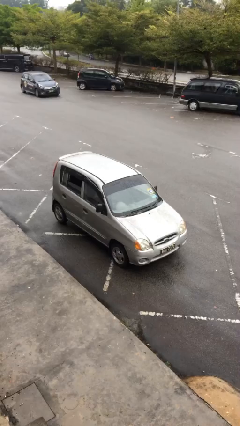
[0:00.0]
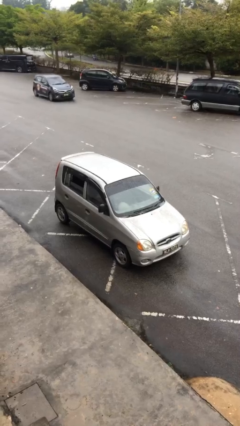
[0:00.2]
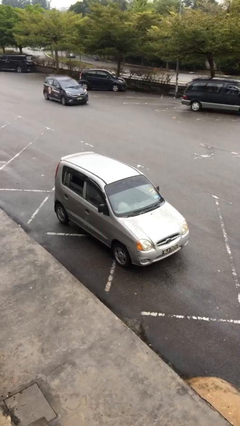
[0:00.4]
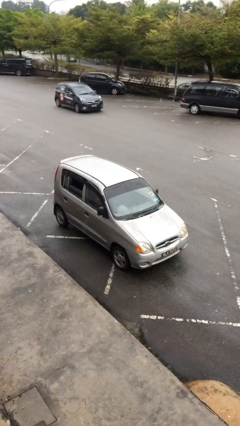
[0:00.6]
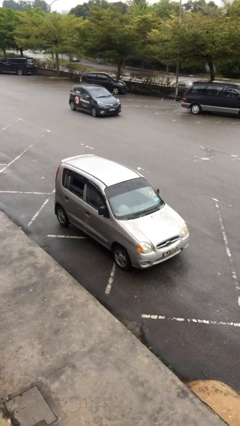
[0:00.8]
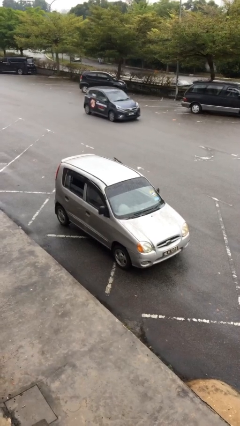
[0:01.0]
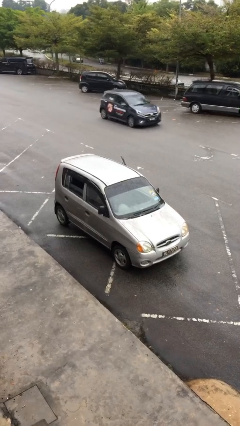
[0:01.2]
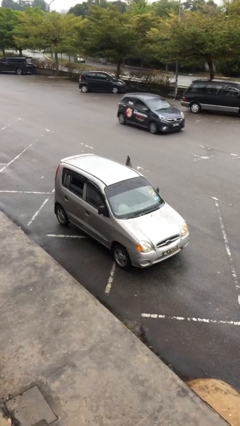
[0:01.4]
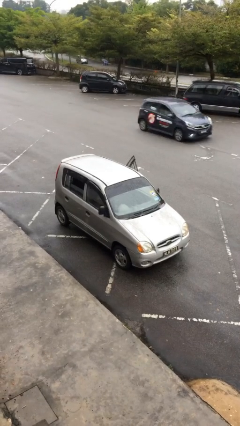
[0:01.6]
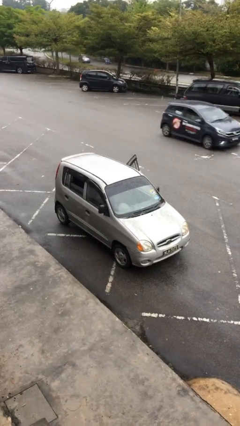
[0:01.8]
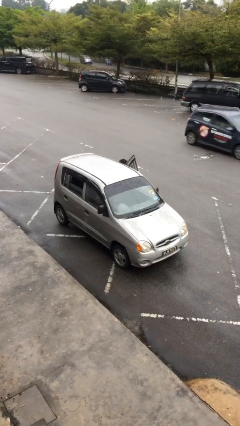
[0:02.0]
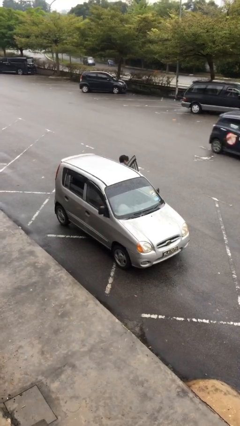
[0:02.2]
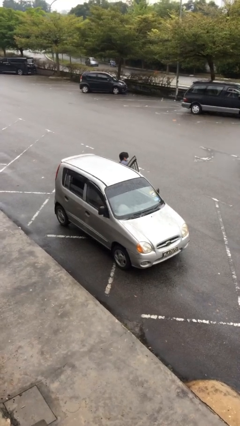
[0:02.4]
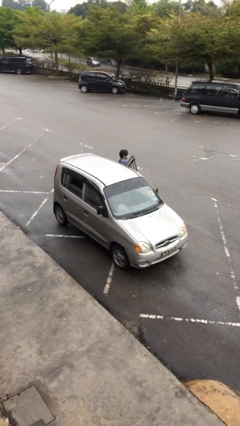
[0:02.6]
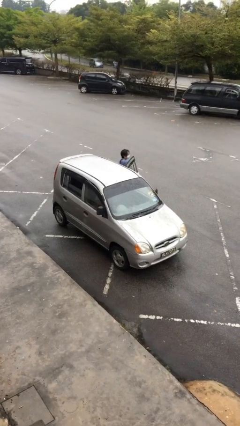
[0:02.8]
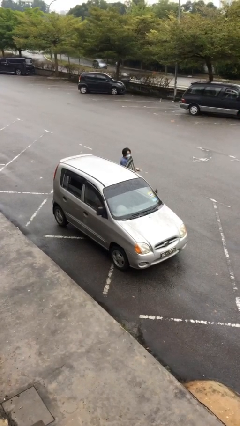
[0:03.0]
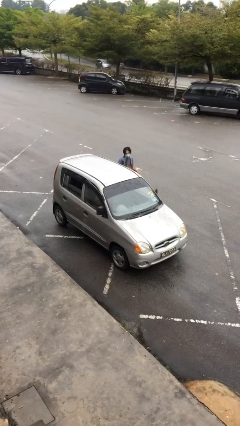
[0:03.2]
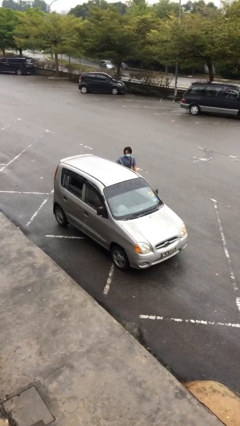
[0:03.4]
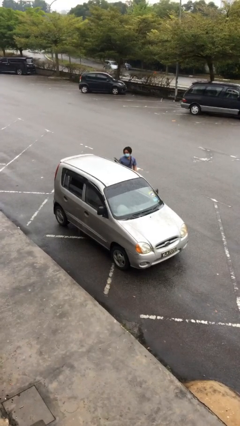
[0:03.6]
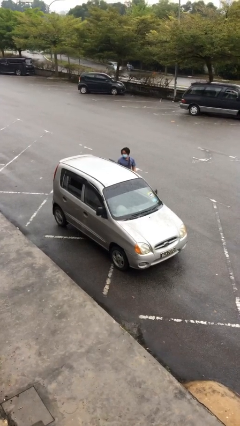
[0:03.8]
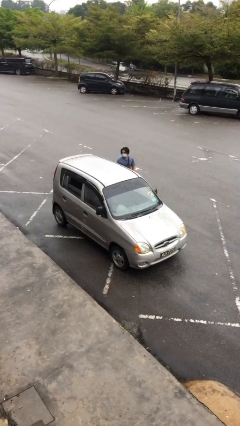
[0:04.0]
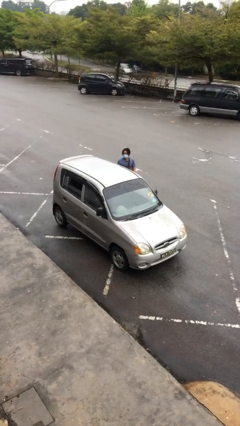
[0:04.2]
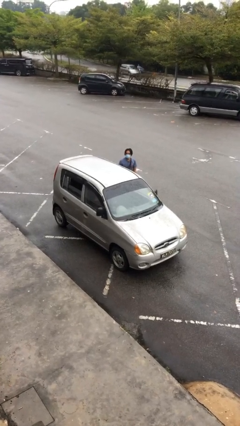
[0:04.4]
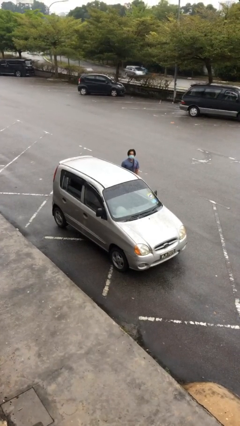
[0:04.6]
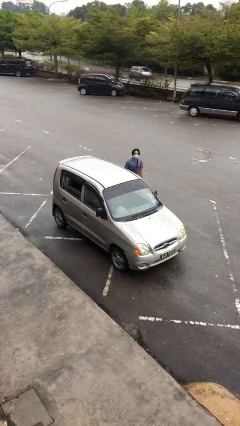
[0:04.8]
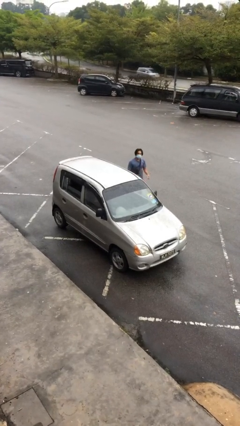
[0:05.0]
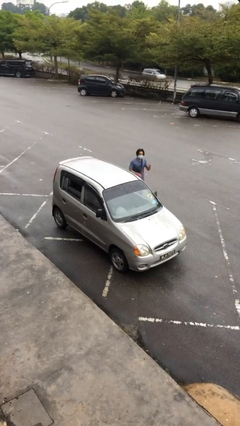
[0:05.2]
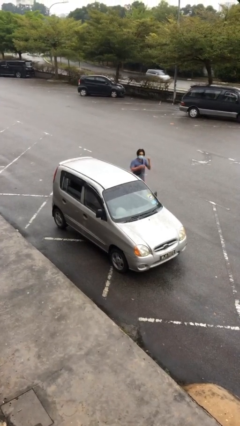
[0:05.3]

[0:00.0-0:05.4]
car drops off person

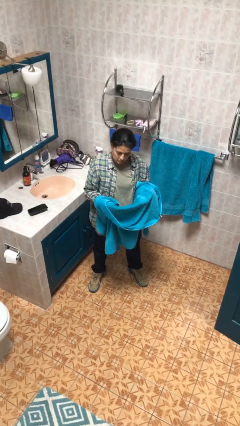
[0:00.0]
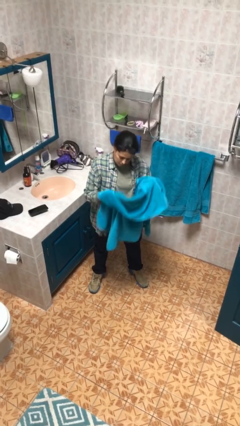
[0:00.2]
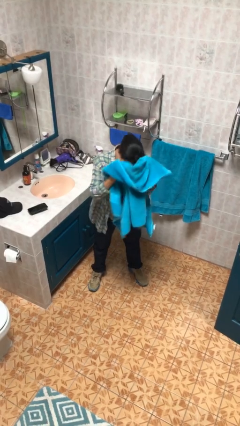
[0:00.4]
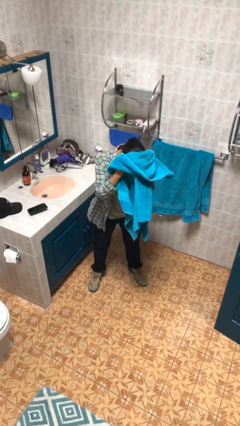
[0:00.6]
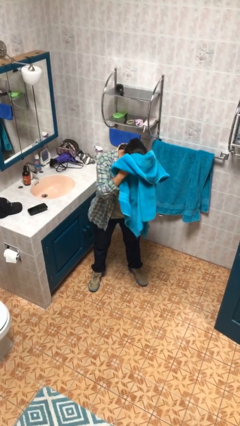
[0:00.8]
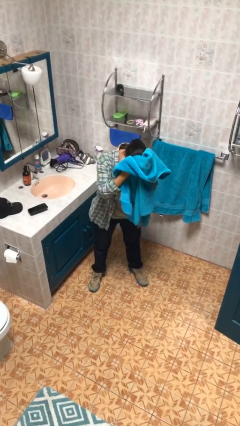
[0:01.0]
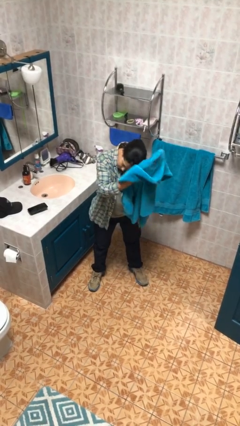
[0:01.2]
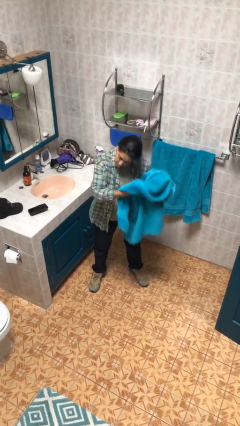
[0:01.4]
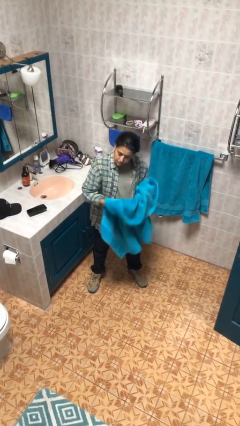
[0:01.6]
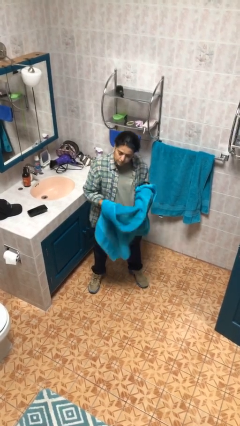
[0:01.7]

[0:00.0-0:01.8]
person dries hair with towel

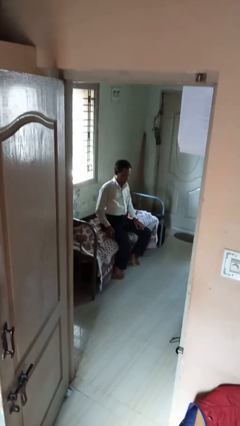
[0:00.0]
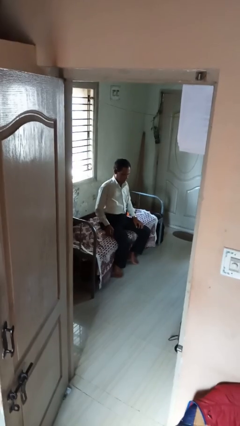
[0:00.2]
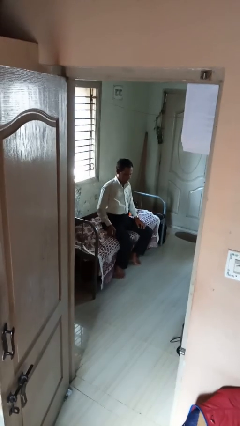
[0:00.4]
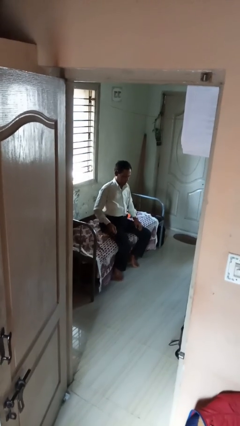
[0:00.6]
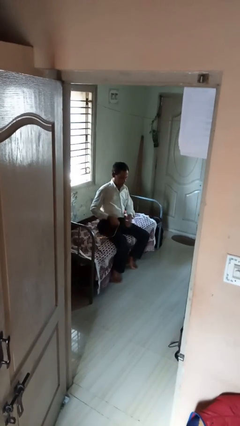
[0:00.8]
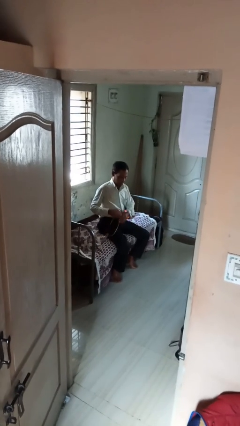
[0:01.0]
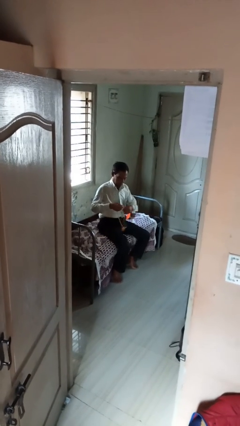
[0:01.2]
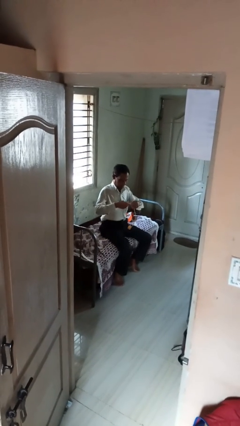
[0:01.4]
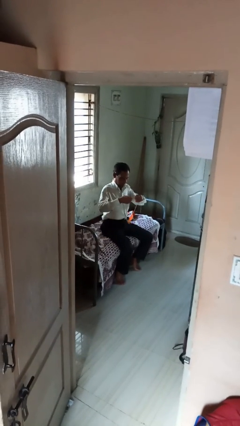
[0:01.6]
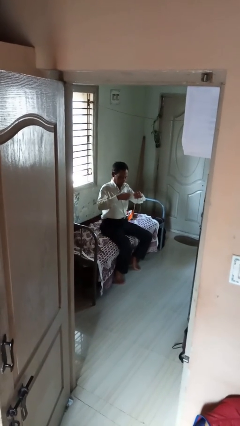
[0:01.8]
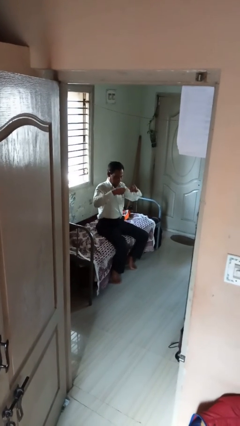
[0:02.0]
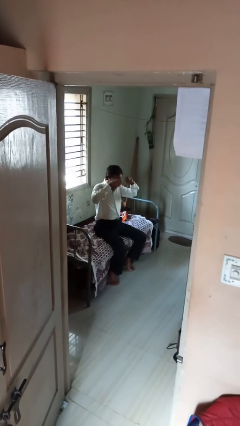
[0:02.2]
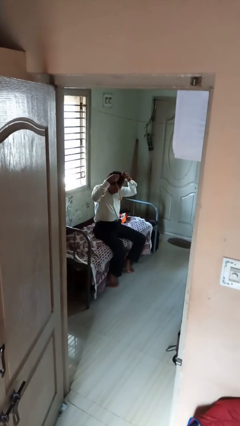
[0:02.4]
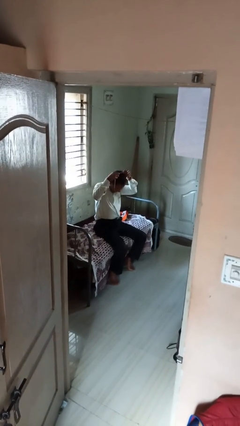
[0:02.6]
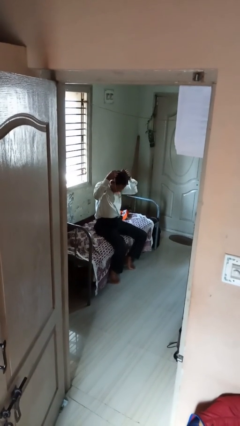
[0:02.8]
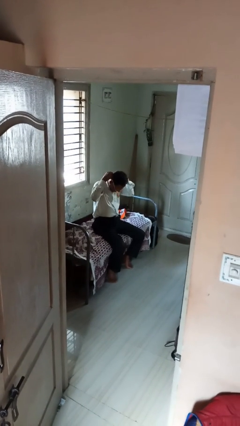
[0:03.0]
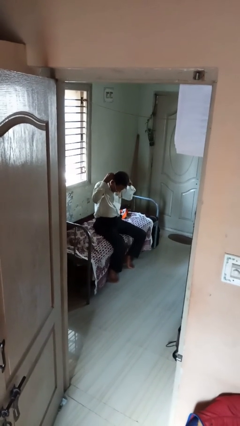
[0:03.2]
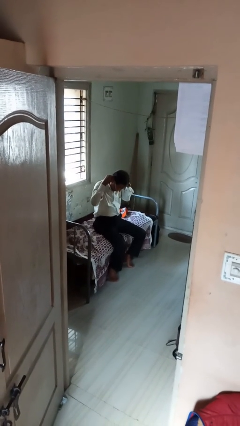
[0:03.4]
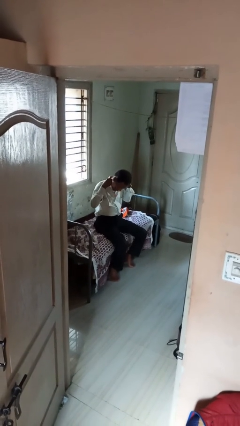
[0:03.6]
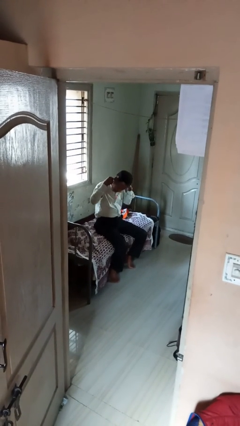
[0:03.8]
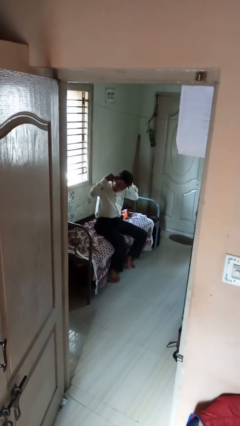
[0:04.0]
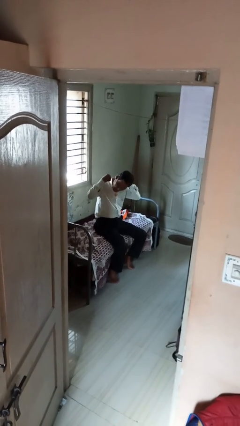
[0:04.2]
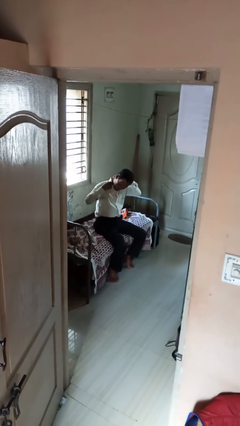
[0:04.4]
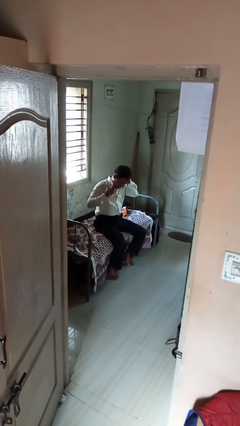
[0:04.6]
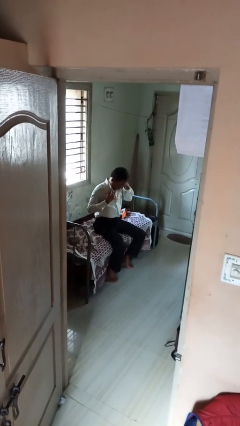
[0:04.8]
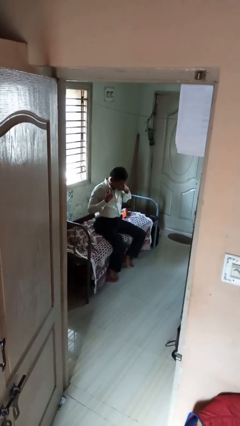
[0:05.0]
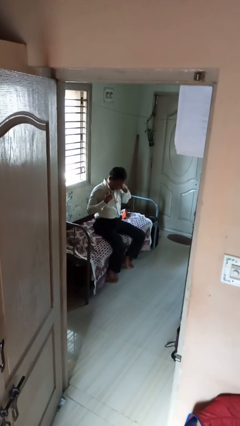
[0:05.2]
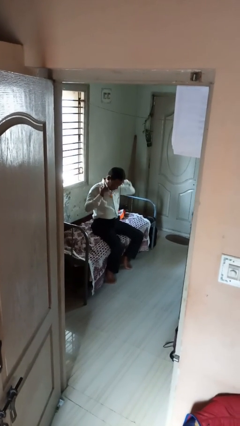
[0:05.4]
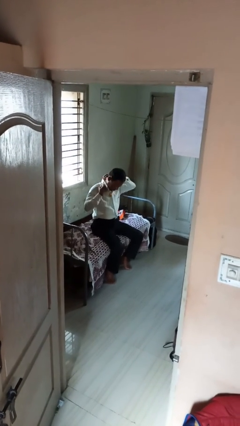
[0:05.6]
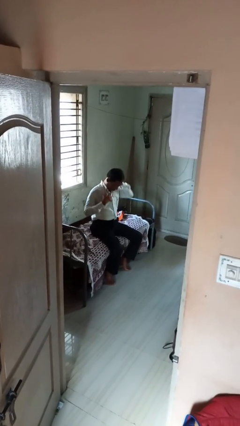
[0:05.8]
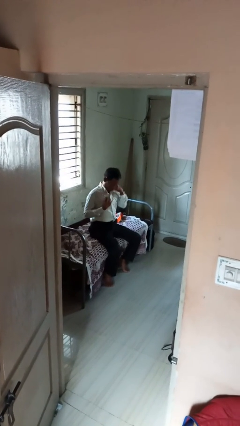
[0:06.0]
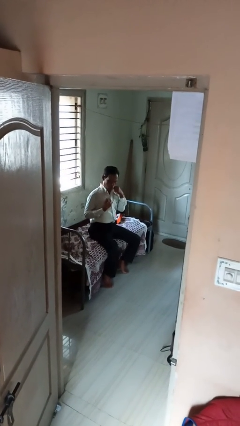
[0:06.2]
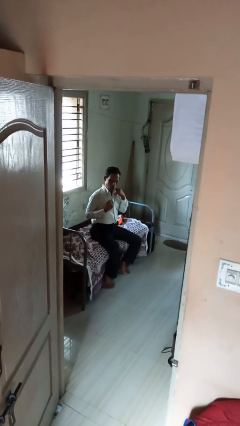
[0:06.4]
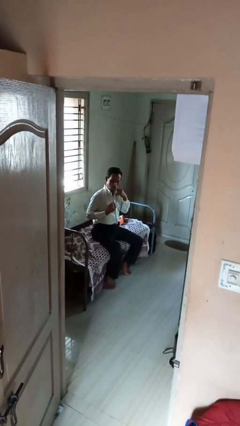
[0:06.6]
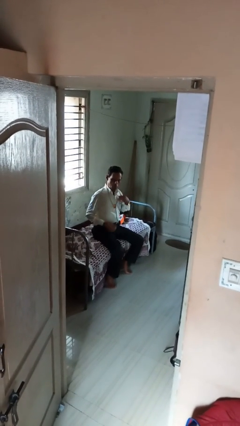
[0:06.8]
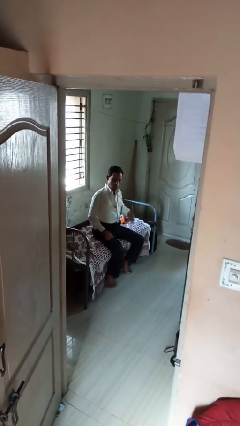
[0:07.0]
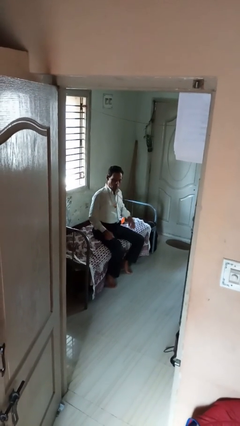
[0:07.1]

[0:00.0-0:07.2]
person puts on necklace

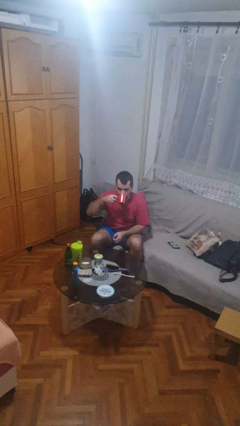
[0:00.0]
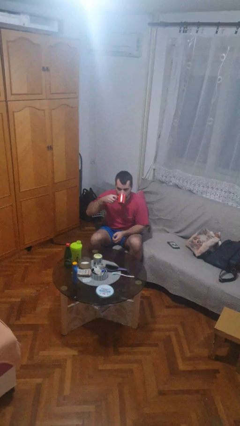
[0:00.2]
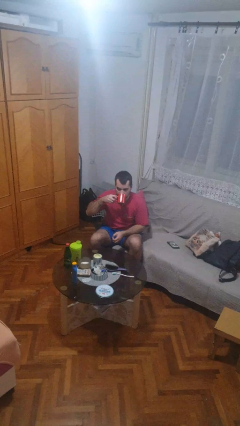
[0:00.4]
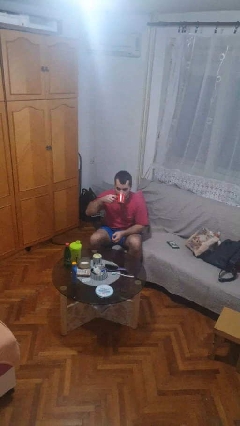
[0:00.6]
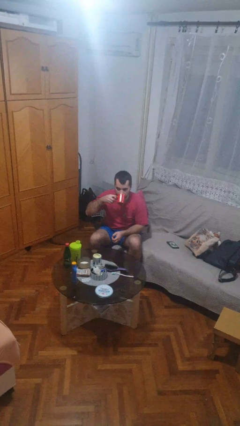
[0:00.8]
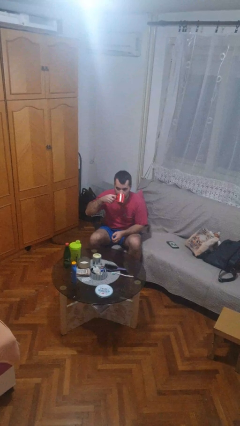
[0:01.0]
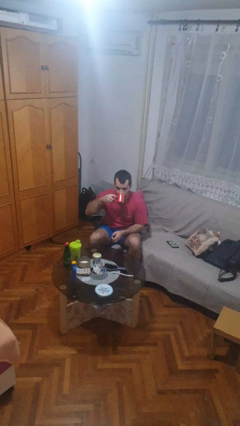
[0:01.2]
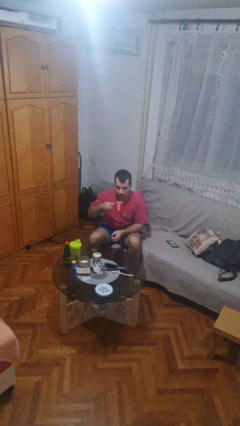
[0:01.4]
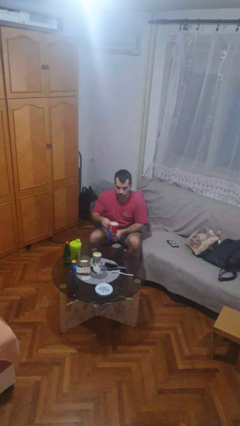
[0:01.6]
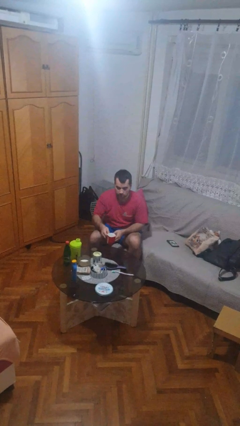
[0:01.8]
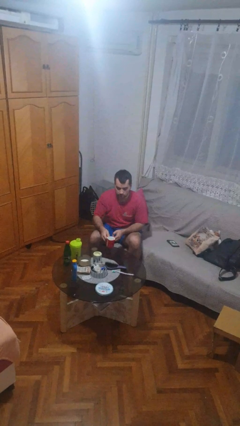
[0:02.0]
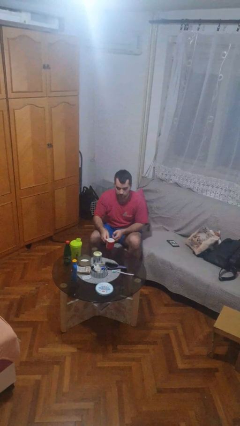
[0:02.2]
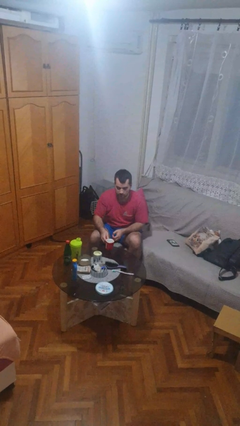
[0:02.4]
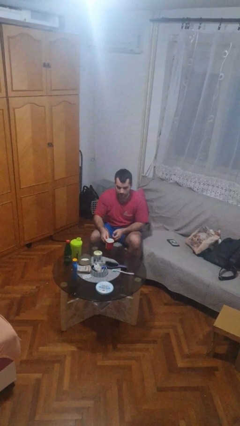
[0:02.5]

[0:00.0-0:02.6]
person puts down object on table

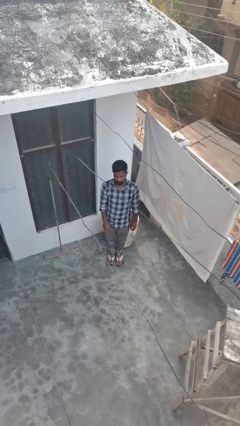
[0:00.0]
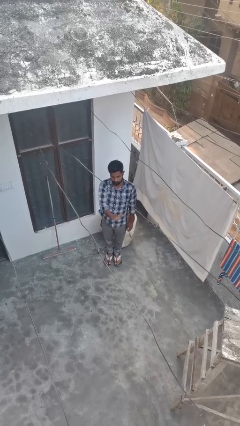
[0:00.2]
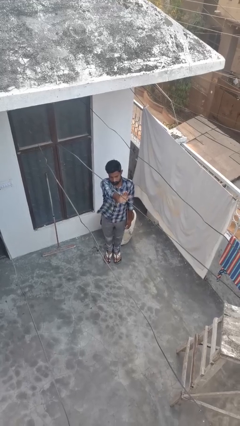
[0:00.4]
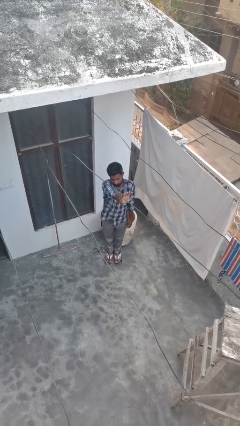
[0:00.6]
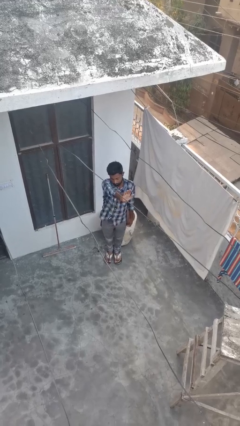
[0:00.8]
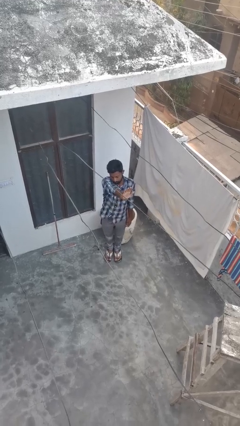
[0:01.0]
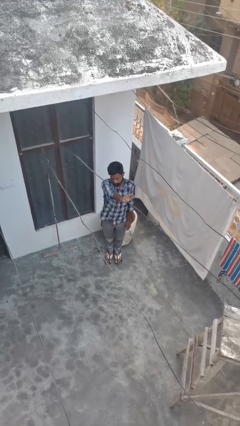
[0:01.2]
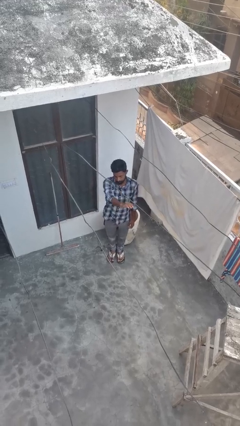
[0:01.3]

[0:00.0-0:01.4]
person gestures stop
